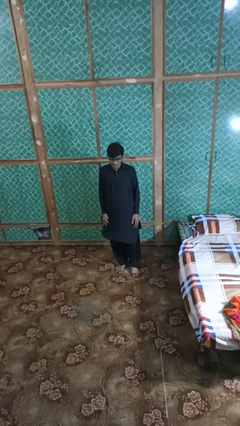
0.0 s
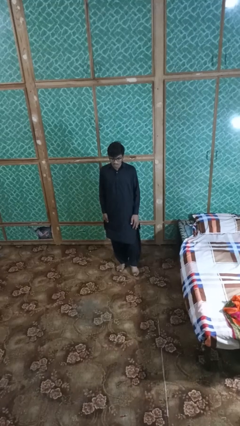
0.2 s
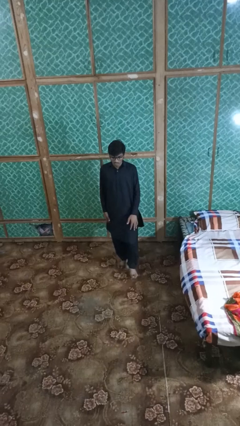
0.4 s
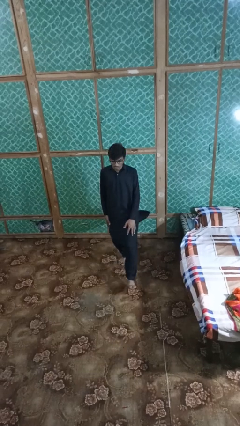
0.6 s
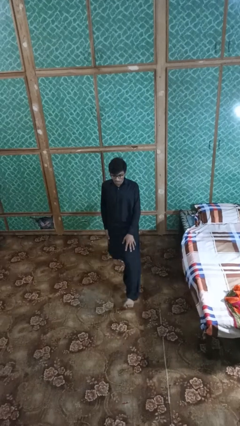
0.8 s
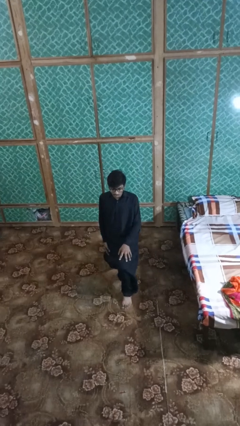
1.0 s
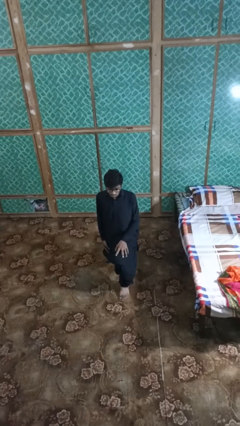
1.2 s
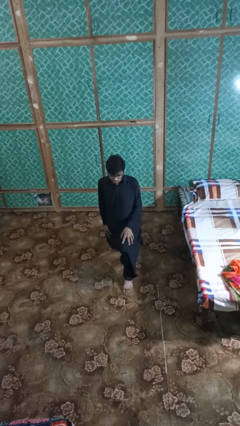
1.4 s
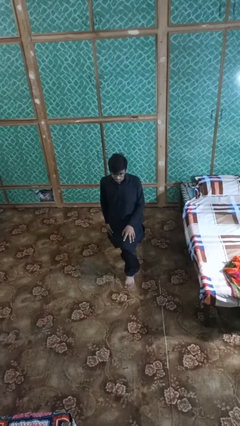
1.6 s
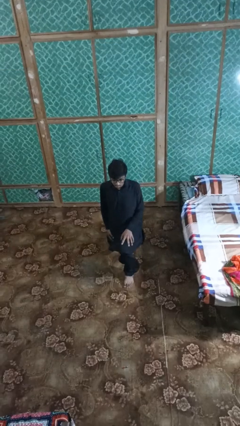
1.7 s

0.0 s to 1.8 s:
person exercises with lunges

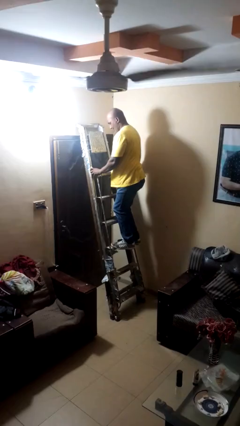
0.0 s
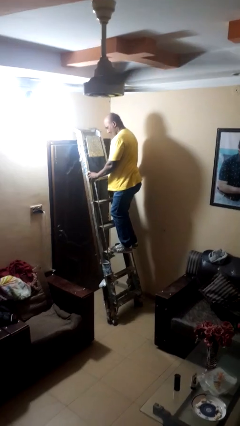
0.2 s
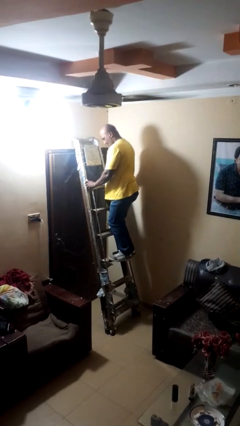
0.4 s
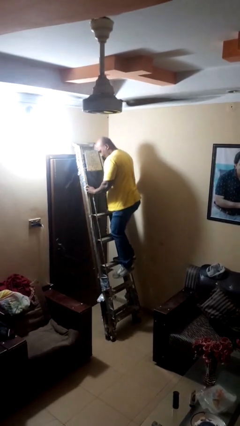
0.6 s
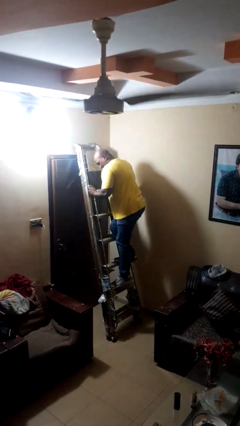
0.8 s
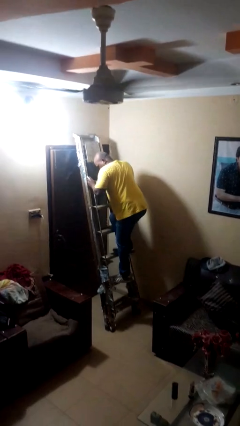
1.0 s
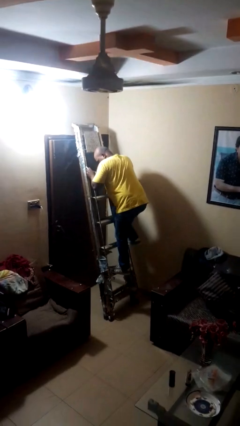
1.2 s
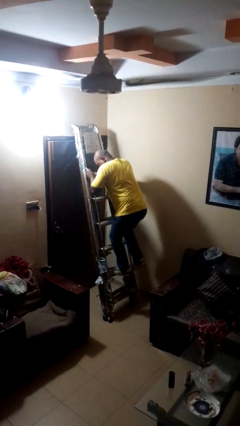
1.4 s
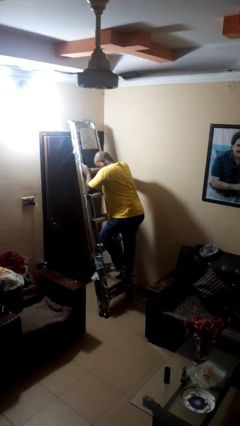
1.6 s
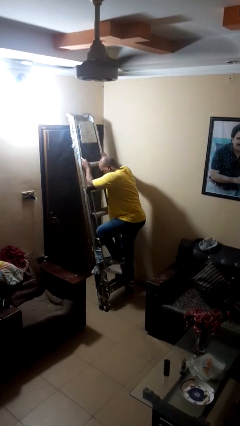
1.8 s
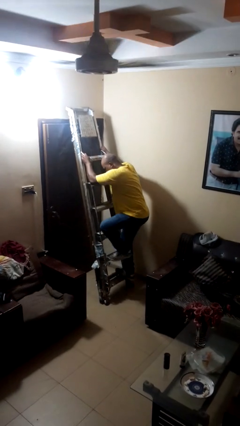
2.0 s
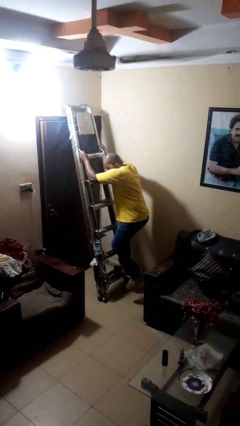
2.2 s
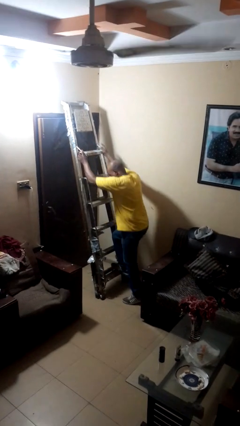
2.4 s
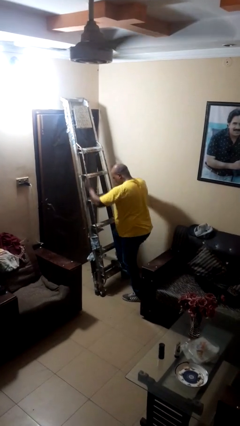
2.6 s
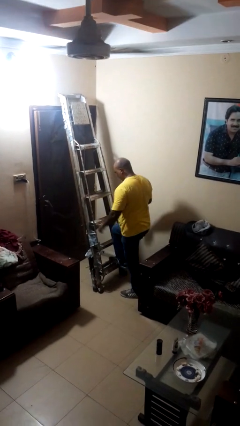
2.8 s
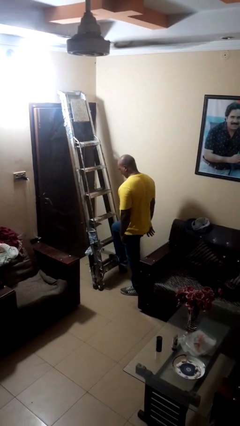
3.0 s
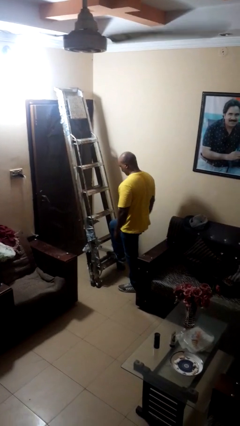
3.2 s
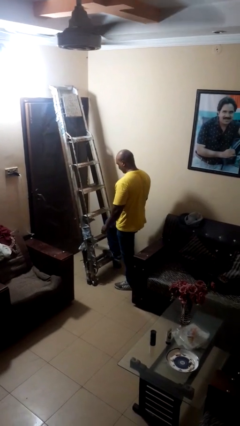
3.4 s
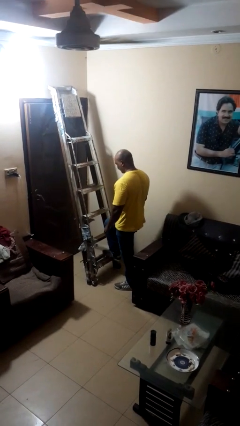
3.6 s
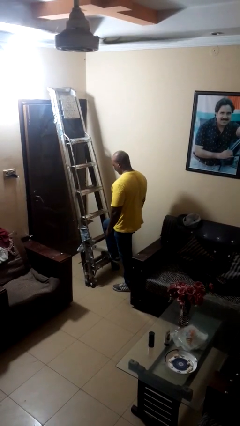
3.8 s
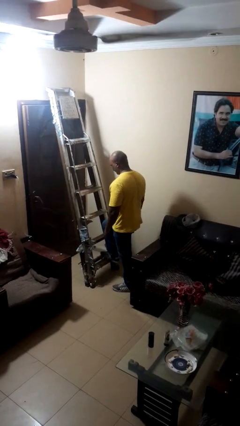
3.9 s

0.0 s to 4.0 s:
person climbs down stairs

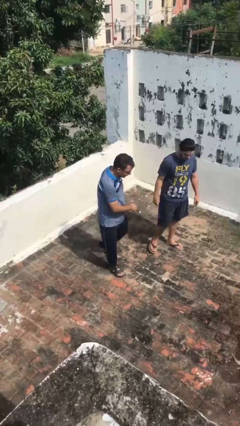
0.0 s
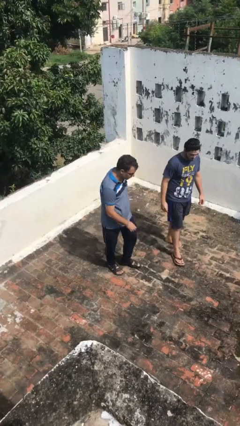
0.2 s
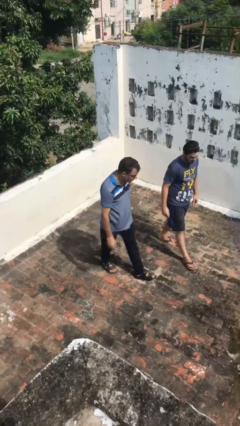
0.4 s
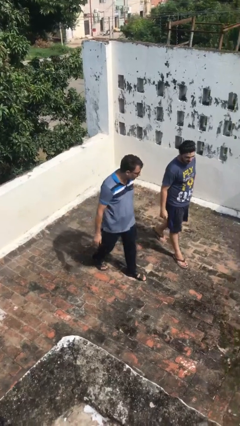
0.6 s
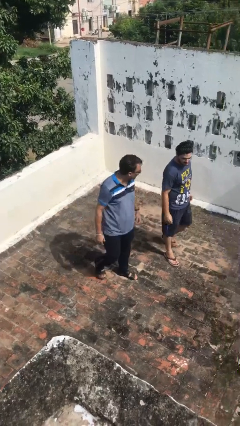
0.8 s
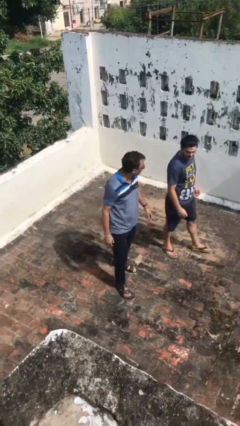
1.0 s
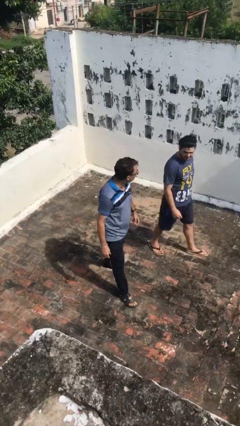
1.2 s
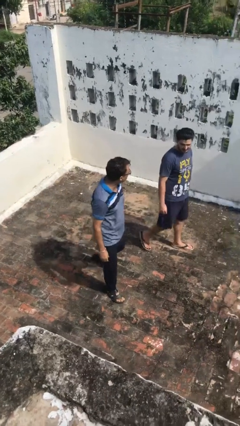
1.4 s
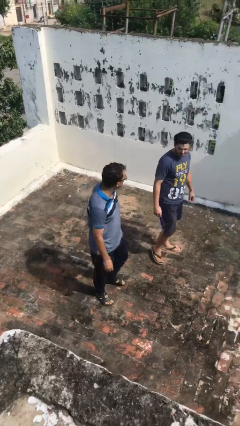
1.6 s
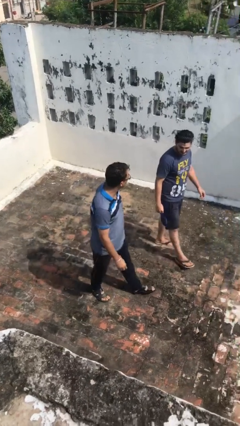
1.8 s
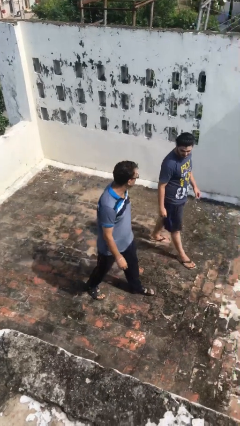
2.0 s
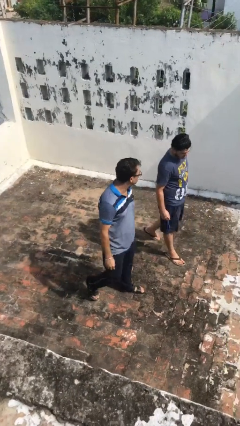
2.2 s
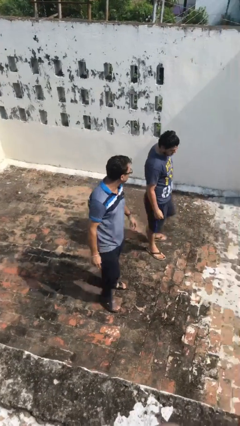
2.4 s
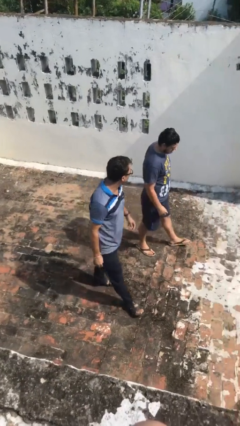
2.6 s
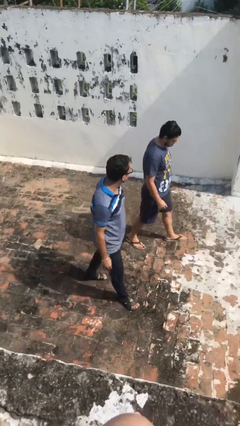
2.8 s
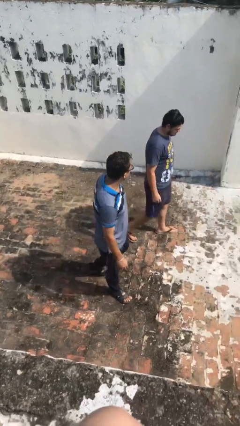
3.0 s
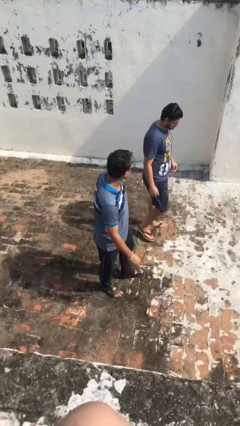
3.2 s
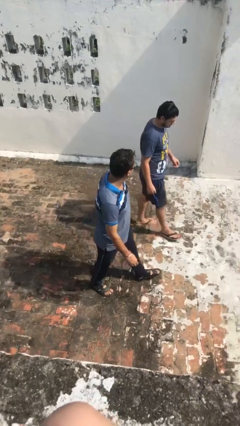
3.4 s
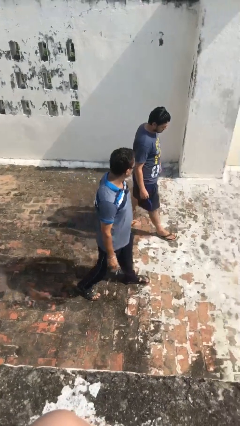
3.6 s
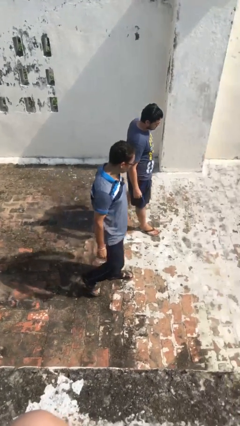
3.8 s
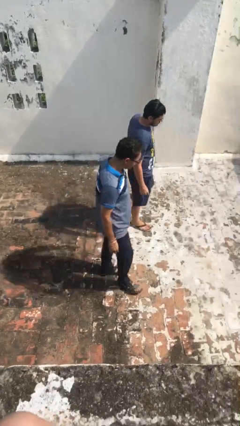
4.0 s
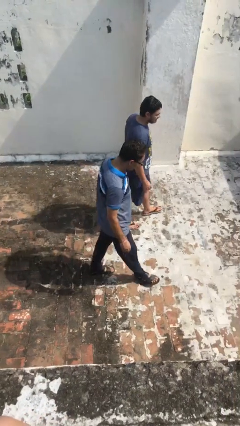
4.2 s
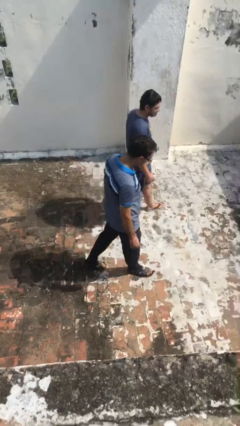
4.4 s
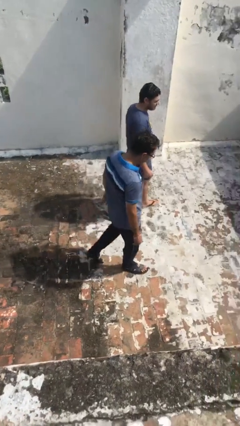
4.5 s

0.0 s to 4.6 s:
person talks to person

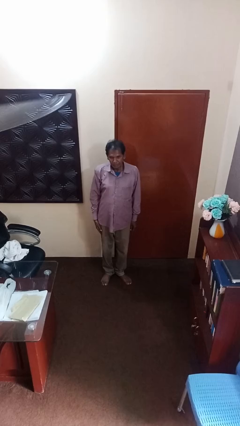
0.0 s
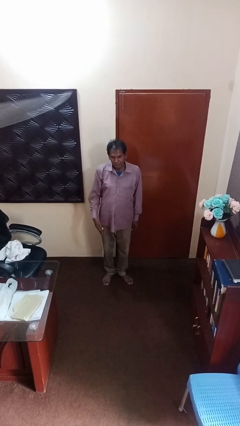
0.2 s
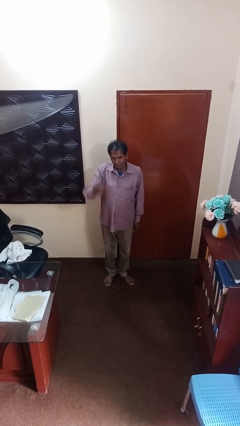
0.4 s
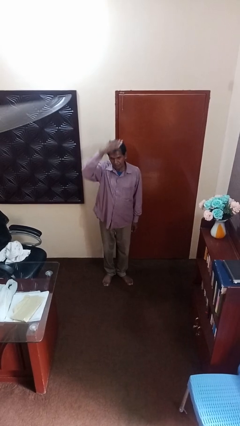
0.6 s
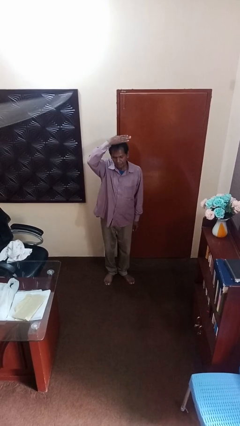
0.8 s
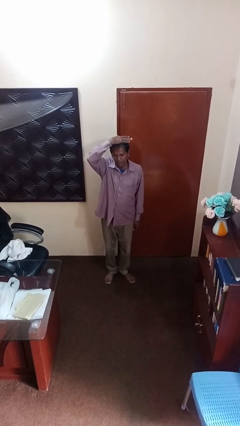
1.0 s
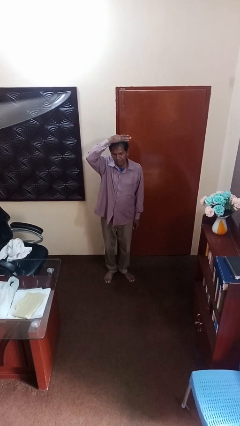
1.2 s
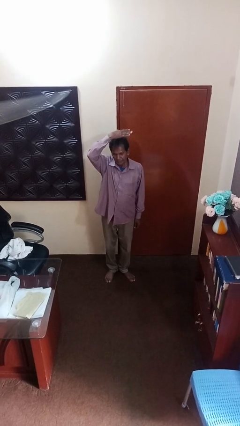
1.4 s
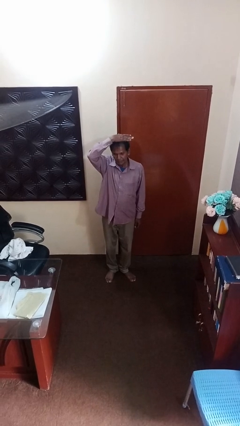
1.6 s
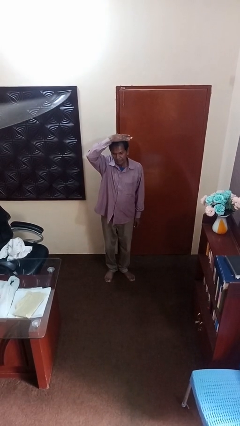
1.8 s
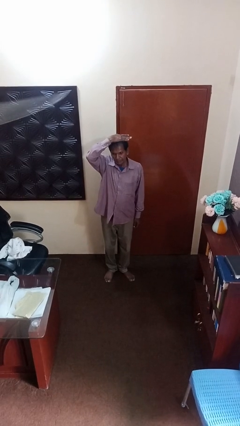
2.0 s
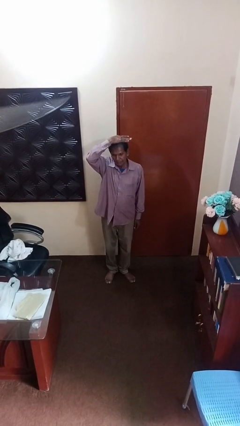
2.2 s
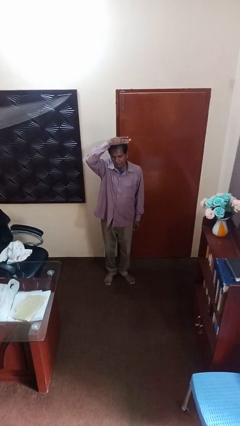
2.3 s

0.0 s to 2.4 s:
person pats head

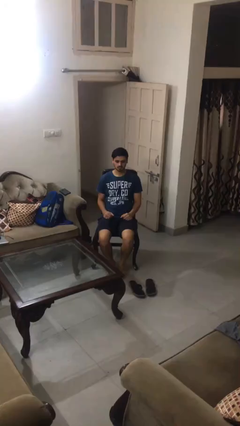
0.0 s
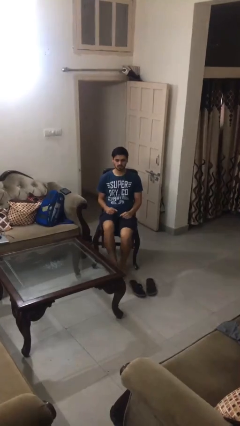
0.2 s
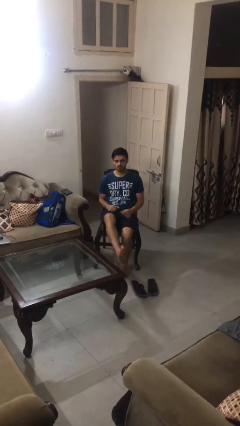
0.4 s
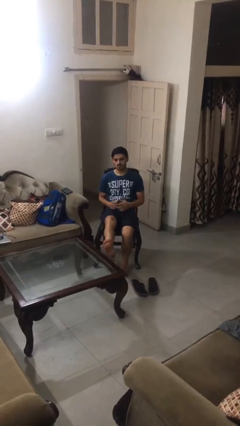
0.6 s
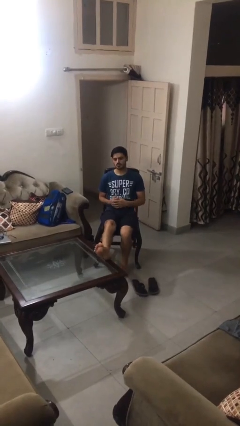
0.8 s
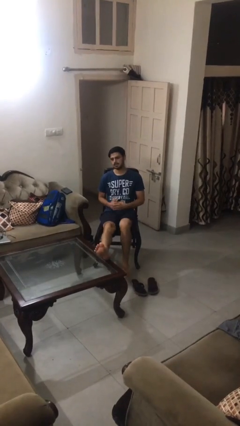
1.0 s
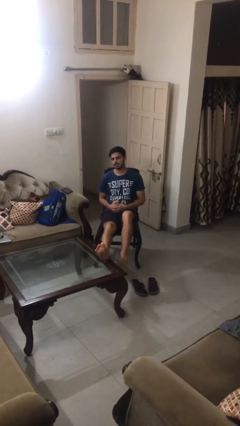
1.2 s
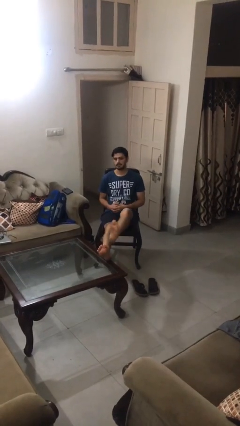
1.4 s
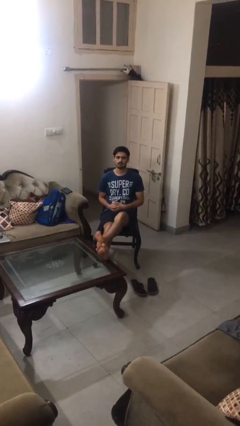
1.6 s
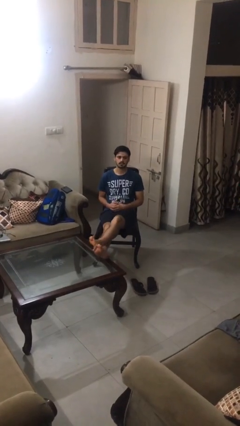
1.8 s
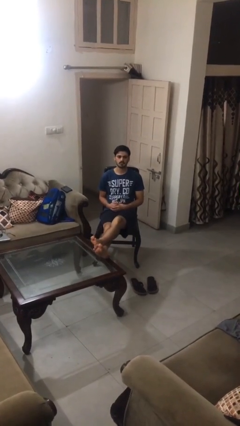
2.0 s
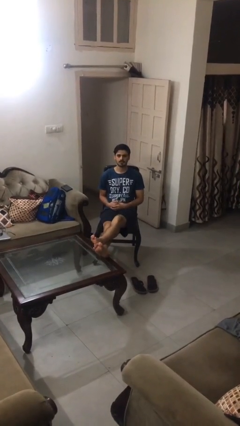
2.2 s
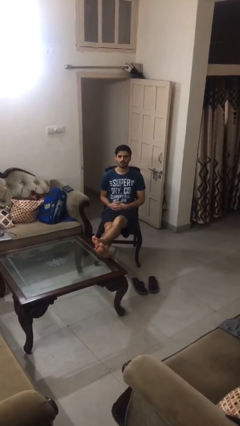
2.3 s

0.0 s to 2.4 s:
person puts feet up

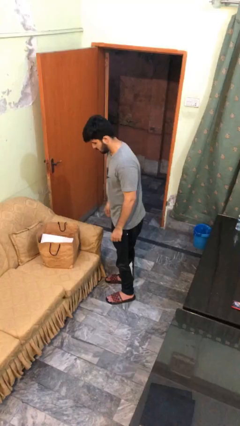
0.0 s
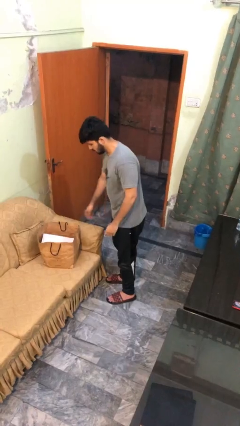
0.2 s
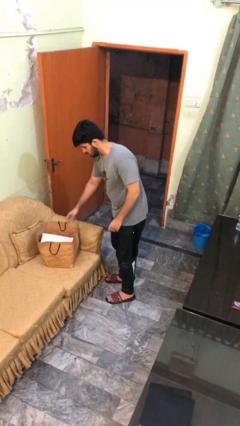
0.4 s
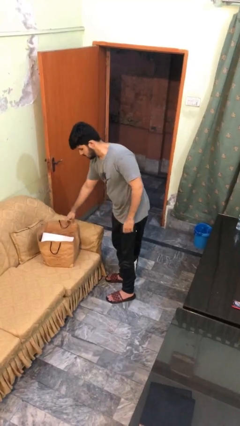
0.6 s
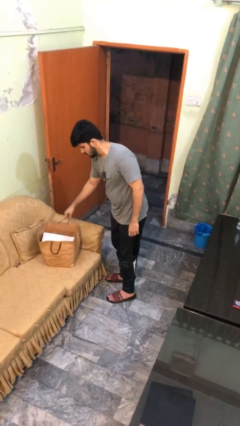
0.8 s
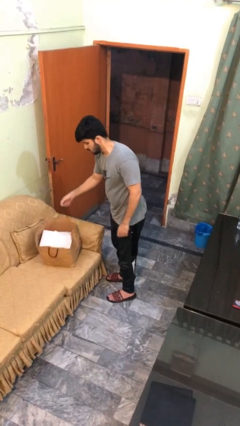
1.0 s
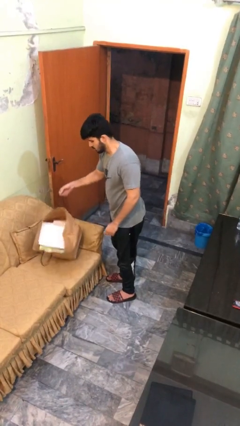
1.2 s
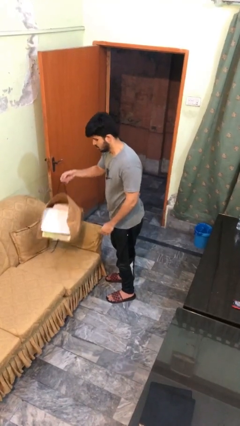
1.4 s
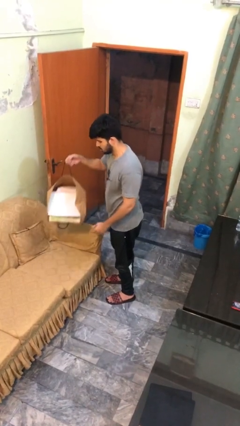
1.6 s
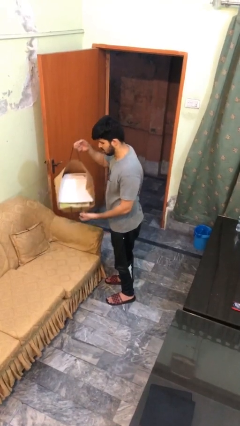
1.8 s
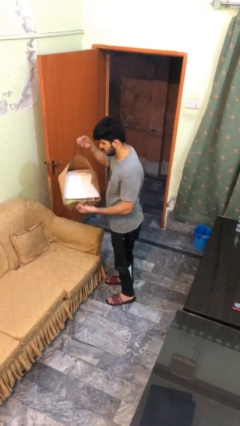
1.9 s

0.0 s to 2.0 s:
person picks up object from couch
